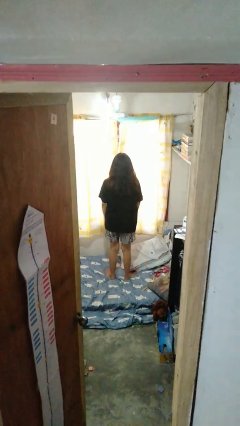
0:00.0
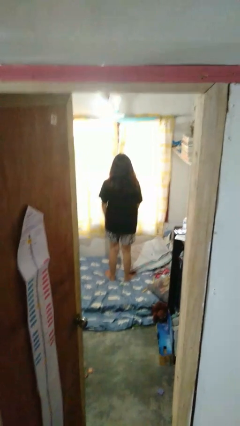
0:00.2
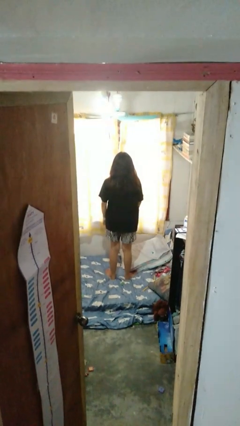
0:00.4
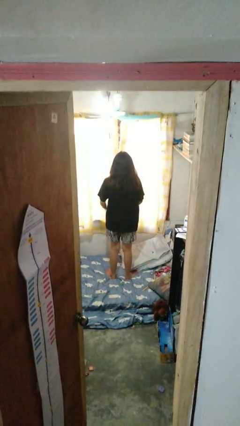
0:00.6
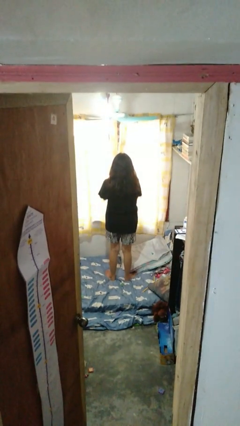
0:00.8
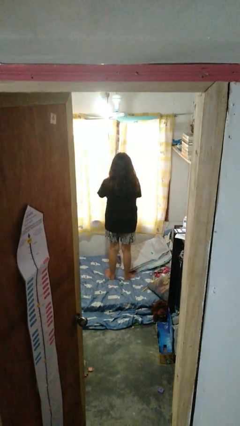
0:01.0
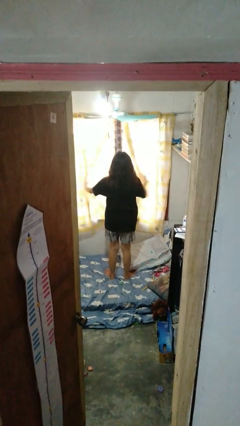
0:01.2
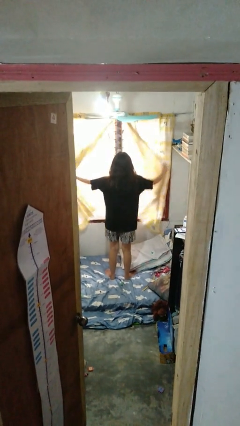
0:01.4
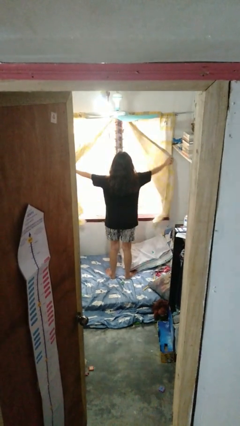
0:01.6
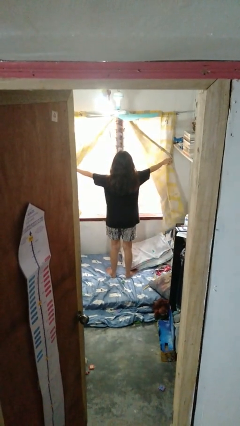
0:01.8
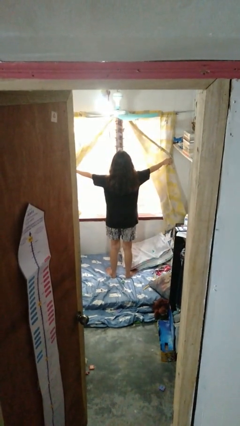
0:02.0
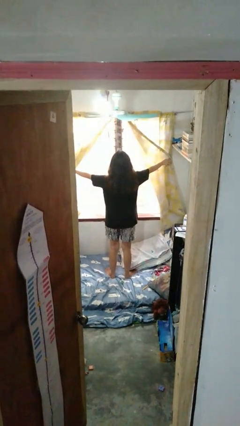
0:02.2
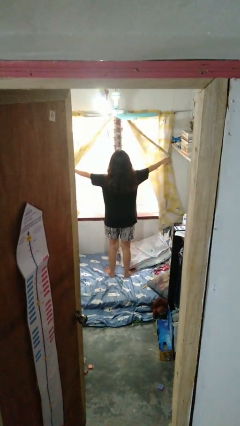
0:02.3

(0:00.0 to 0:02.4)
person opens curtains

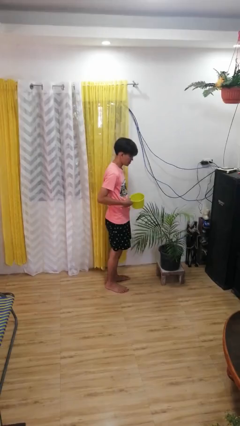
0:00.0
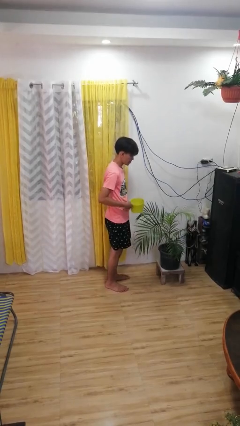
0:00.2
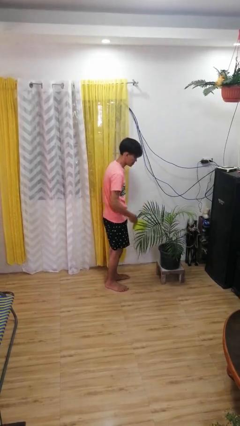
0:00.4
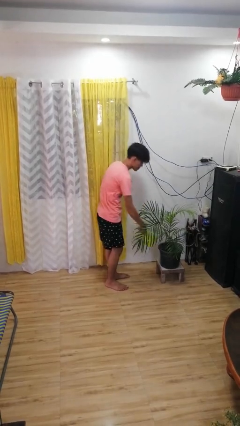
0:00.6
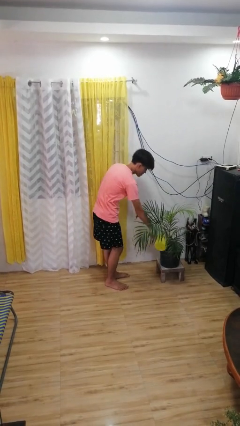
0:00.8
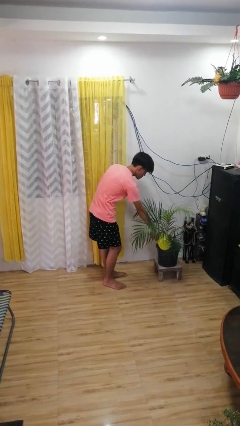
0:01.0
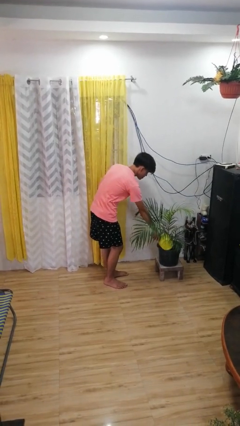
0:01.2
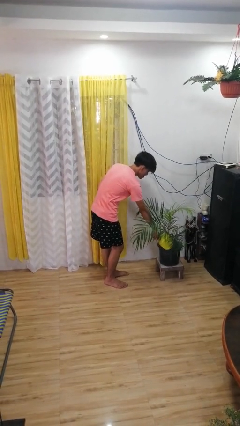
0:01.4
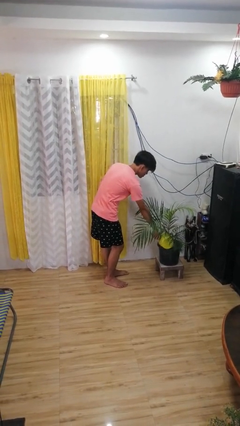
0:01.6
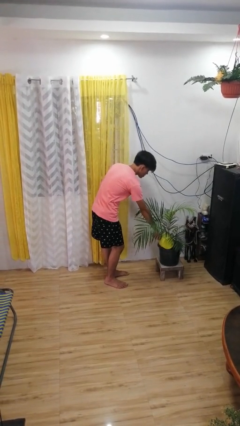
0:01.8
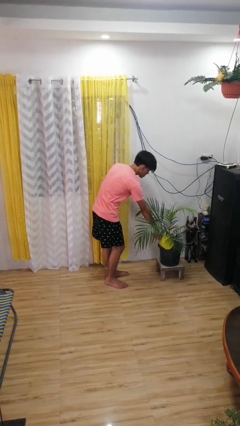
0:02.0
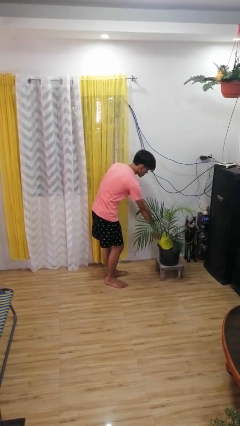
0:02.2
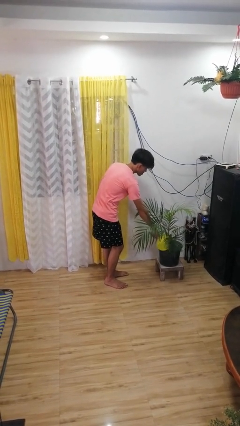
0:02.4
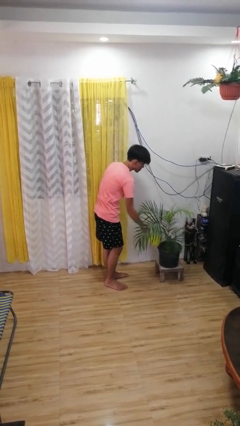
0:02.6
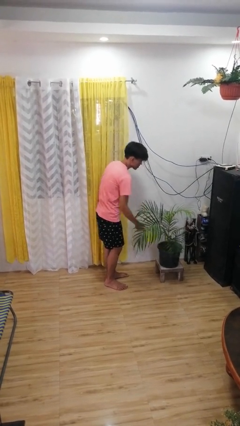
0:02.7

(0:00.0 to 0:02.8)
person waters houseplant

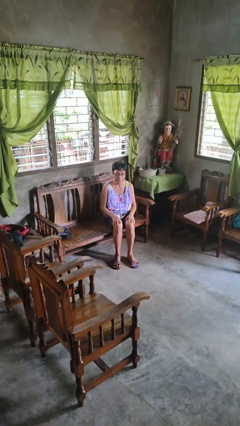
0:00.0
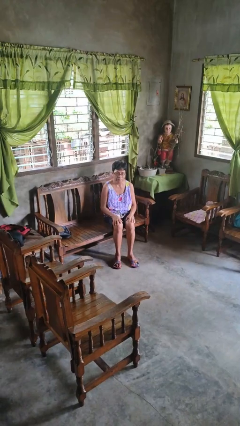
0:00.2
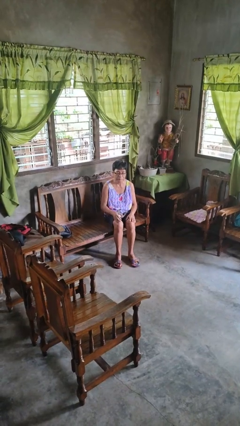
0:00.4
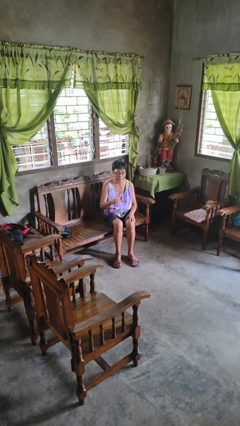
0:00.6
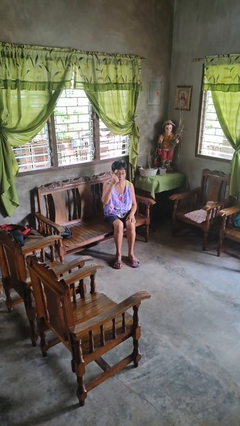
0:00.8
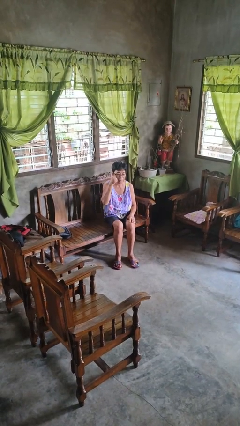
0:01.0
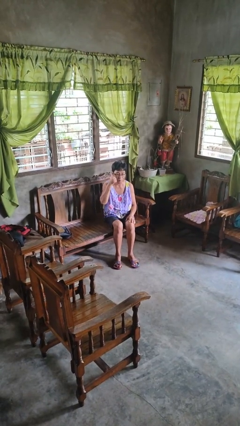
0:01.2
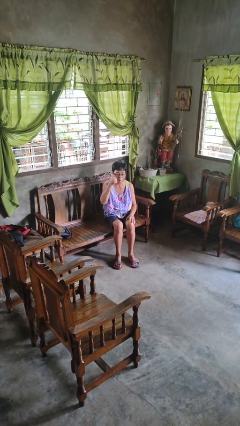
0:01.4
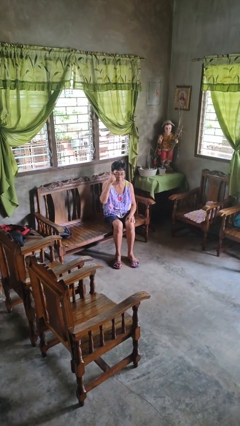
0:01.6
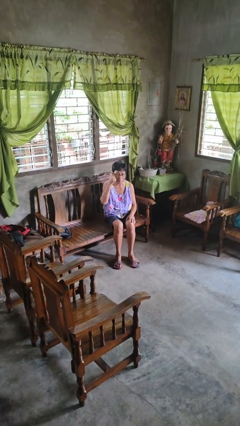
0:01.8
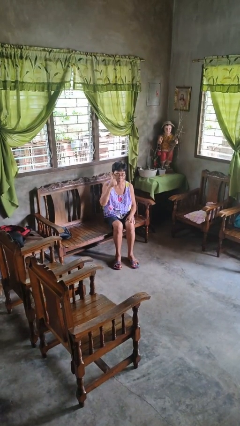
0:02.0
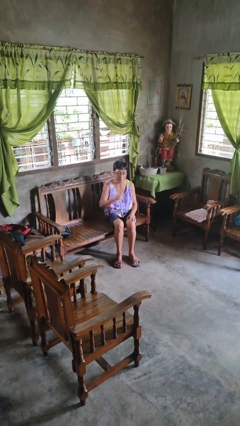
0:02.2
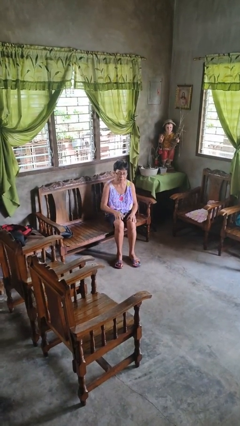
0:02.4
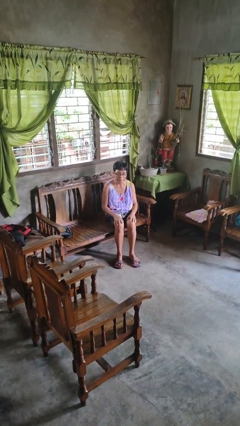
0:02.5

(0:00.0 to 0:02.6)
person gestures behind me

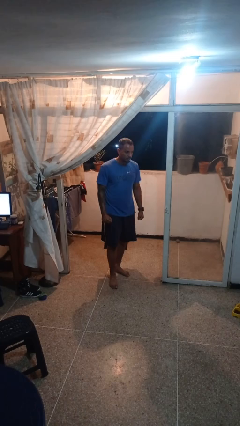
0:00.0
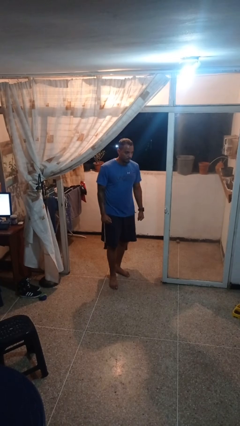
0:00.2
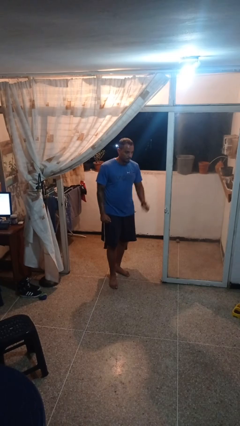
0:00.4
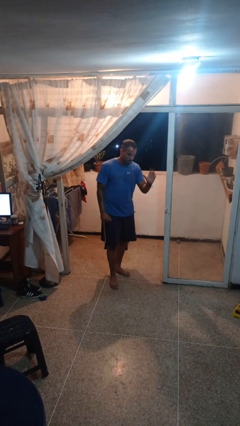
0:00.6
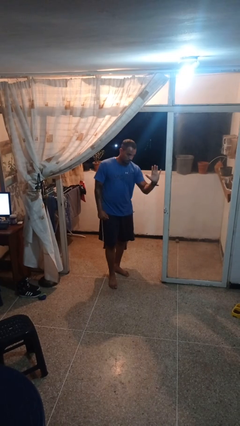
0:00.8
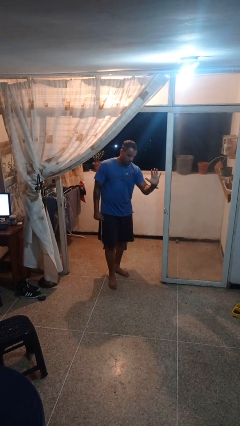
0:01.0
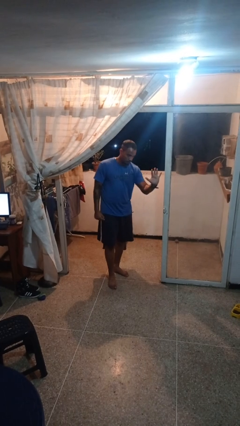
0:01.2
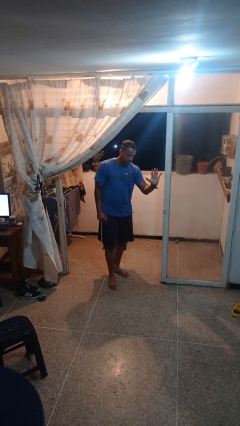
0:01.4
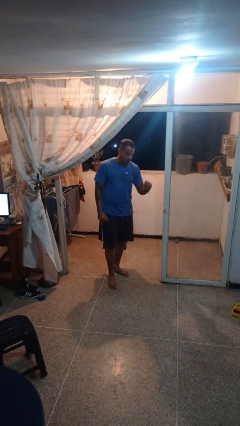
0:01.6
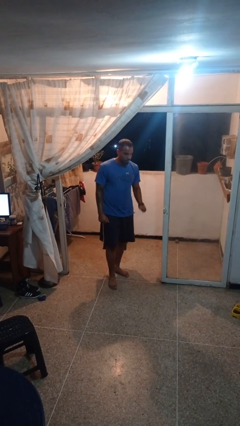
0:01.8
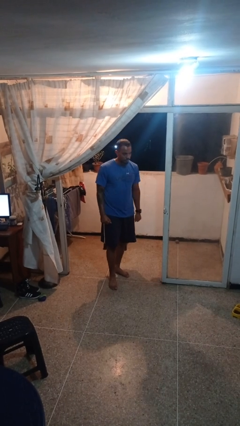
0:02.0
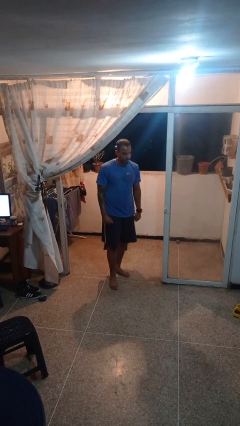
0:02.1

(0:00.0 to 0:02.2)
person gestures number five

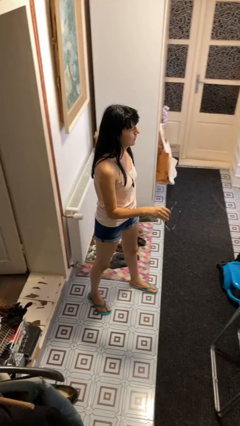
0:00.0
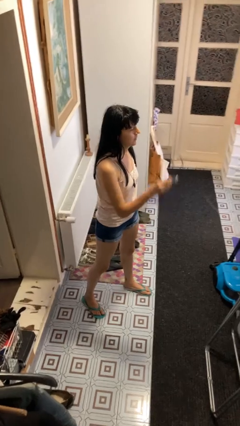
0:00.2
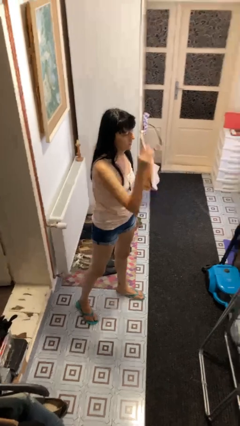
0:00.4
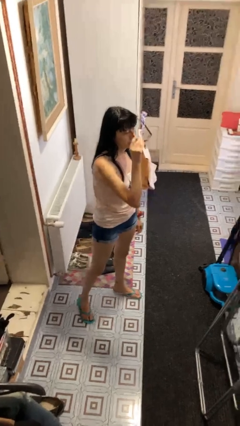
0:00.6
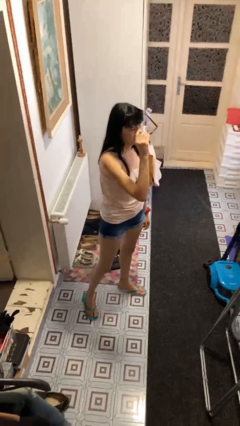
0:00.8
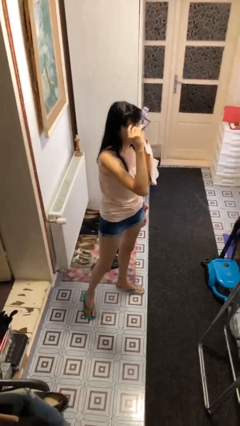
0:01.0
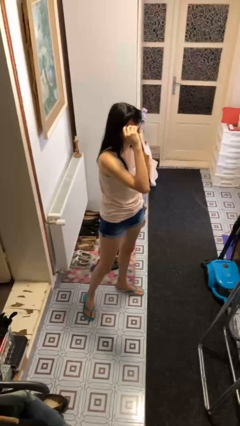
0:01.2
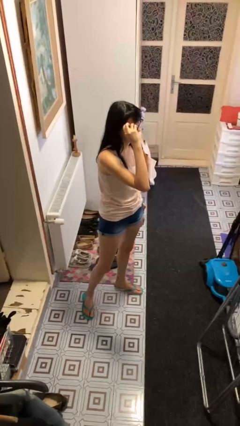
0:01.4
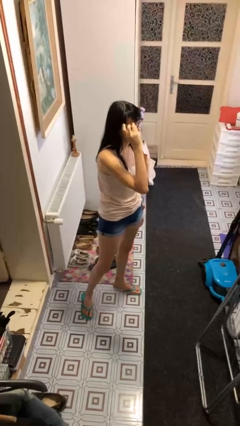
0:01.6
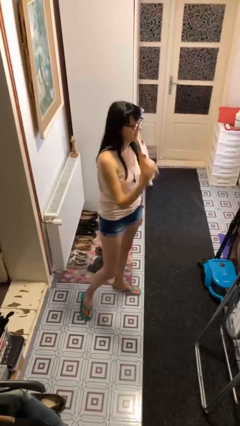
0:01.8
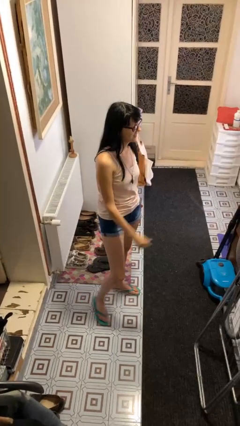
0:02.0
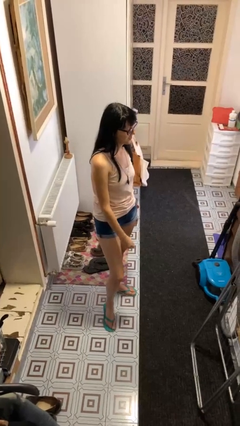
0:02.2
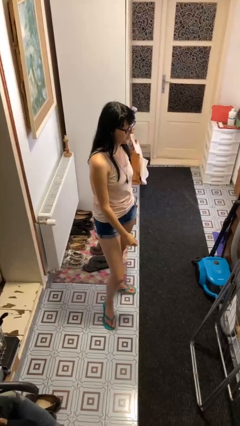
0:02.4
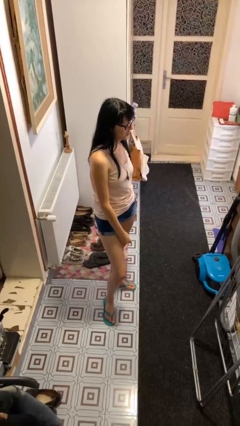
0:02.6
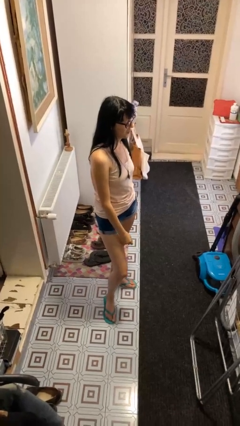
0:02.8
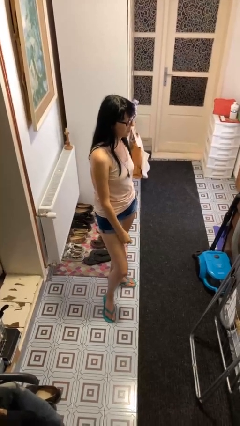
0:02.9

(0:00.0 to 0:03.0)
person puts on glasses

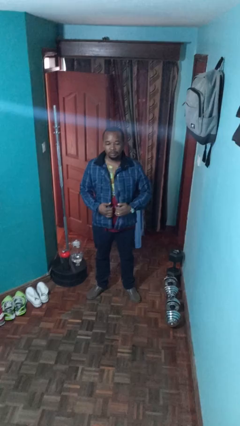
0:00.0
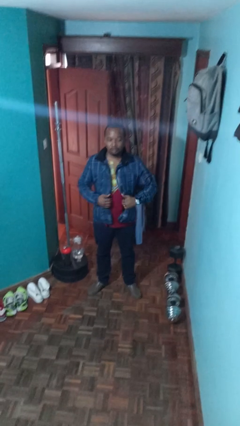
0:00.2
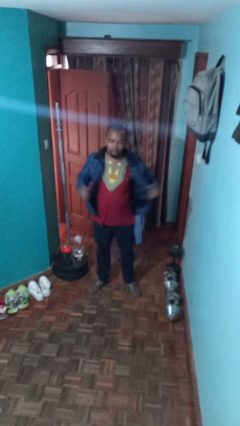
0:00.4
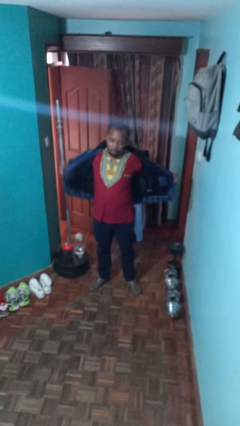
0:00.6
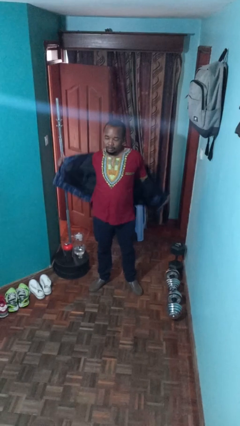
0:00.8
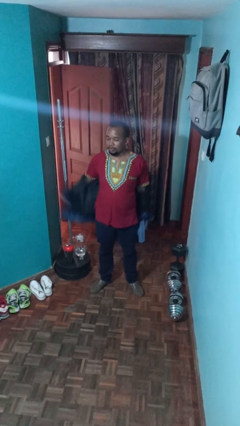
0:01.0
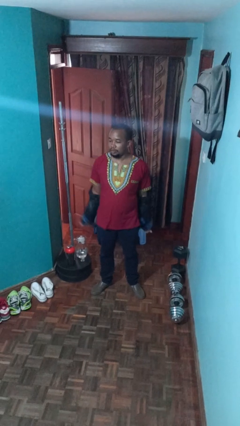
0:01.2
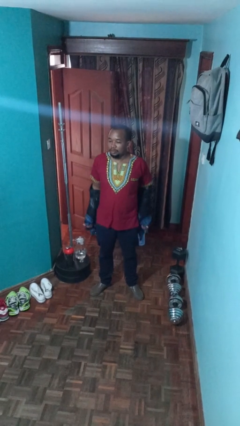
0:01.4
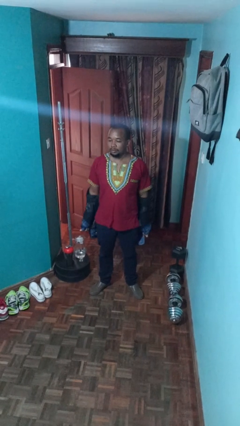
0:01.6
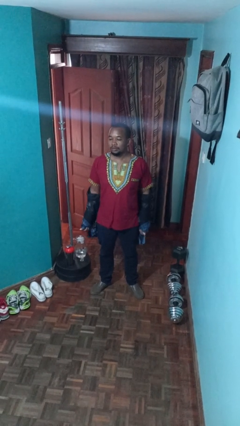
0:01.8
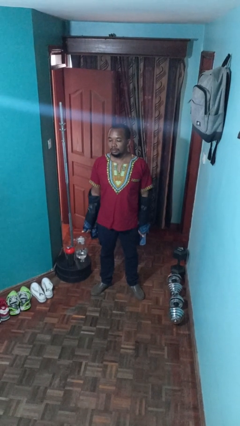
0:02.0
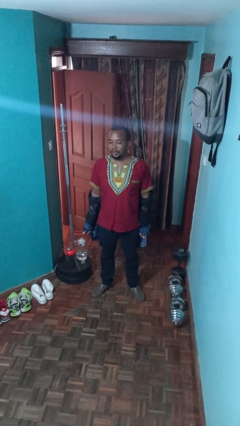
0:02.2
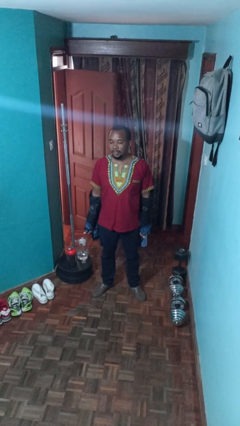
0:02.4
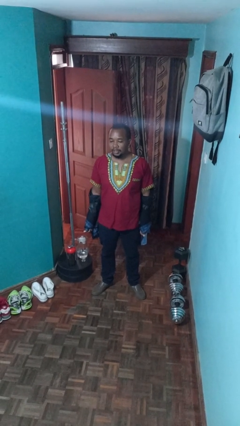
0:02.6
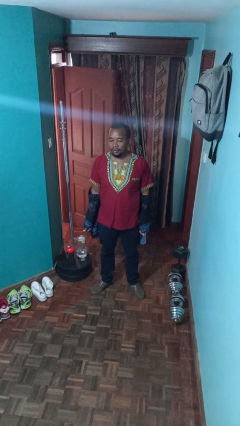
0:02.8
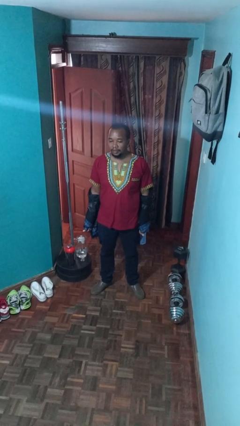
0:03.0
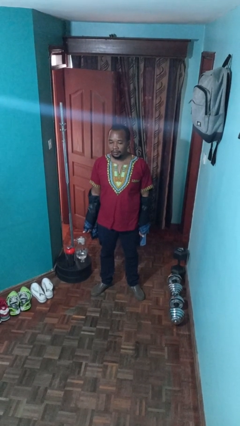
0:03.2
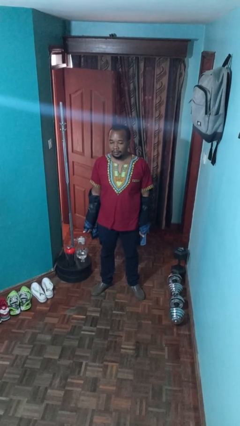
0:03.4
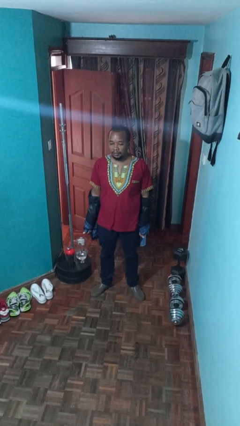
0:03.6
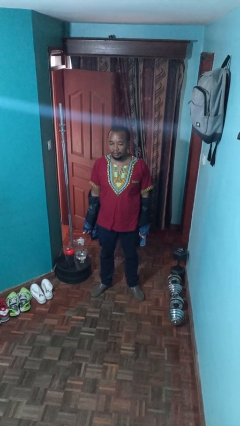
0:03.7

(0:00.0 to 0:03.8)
person takes off jacket

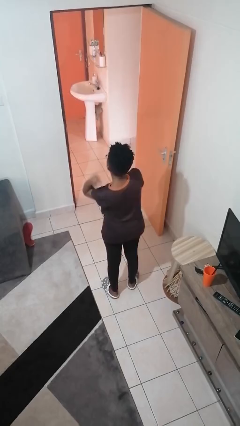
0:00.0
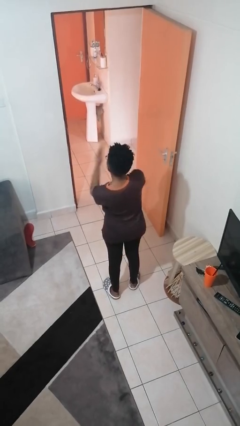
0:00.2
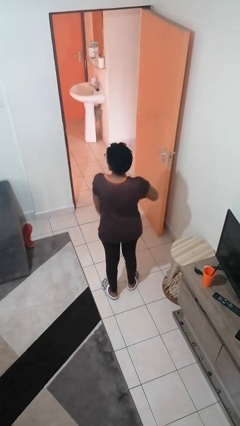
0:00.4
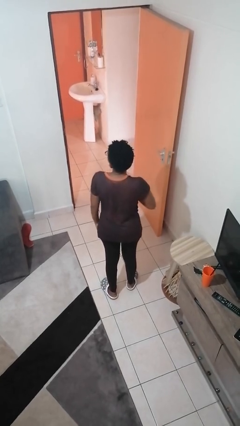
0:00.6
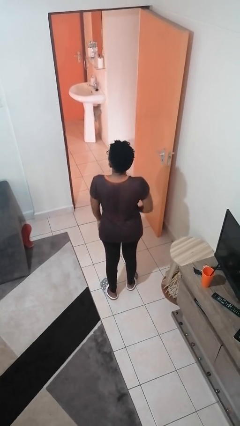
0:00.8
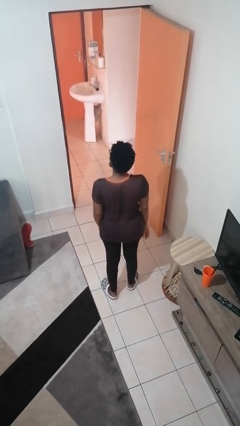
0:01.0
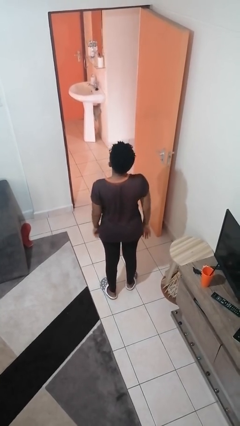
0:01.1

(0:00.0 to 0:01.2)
person karate chop
